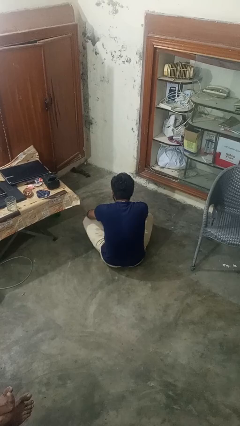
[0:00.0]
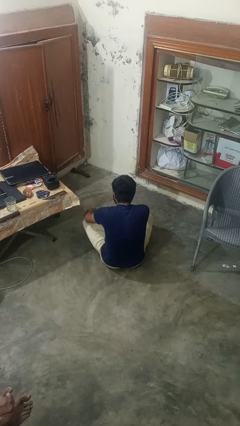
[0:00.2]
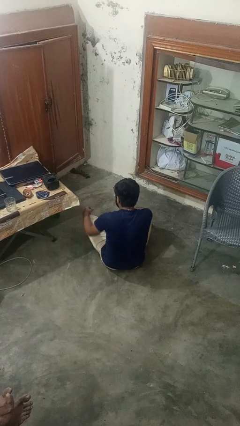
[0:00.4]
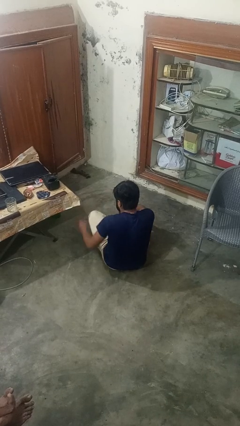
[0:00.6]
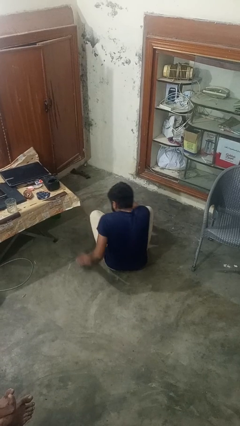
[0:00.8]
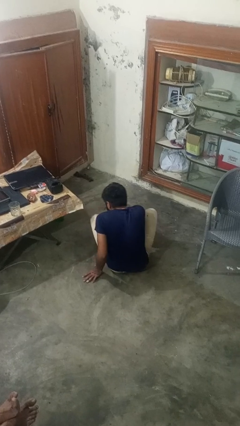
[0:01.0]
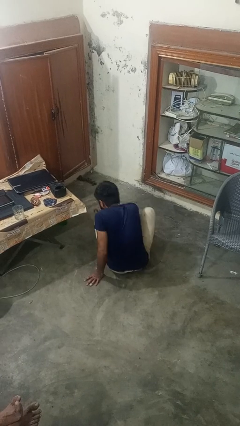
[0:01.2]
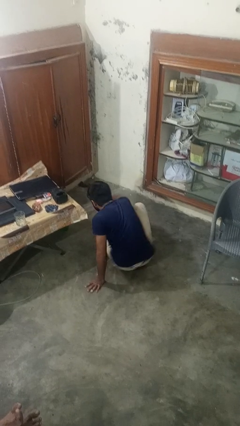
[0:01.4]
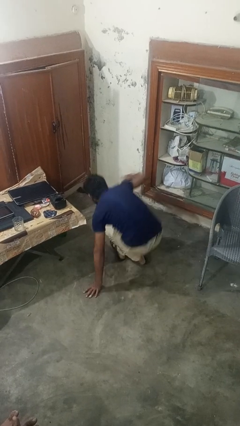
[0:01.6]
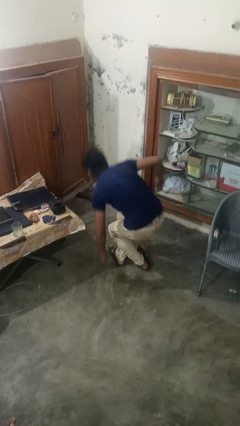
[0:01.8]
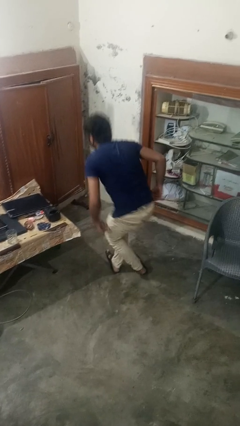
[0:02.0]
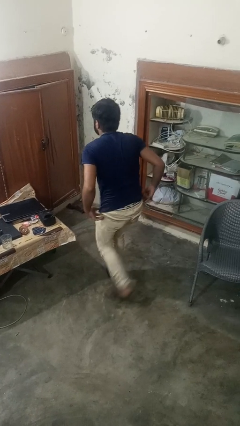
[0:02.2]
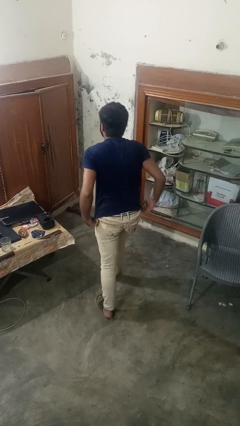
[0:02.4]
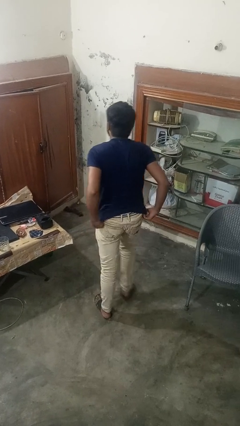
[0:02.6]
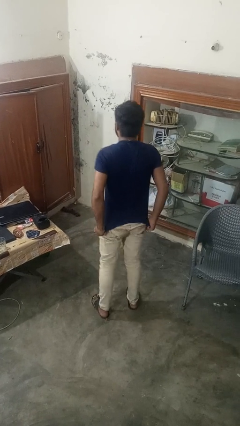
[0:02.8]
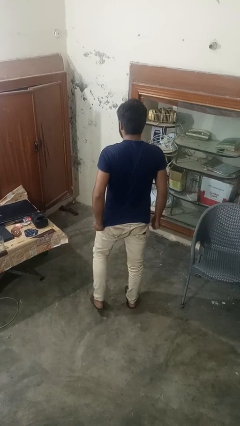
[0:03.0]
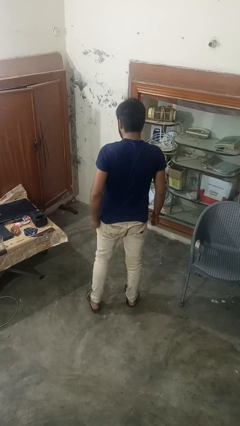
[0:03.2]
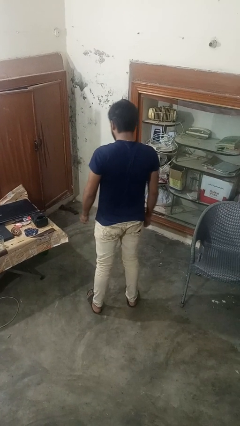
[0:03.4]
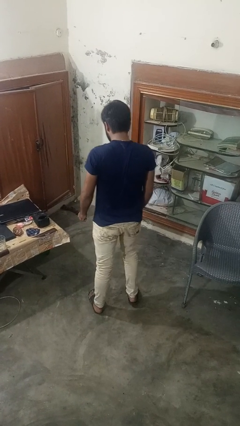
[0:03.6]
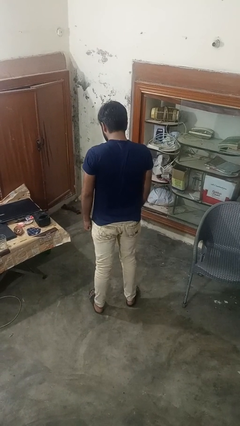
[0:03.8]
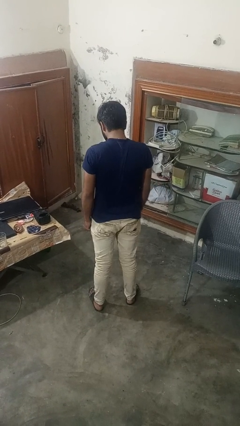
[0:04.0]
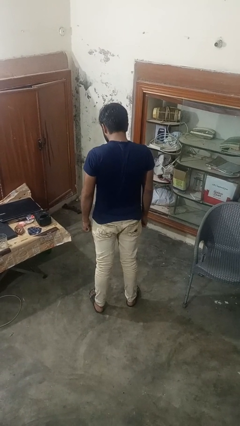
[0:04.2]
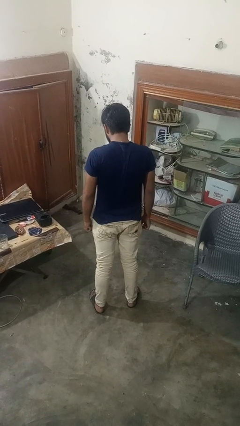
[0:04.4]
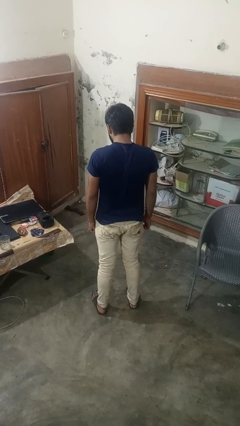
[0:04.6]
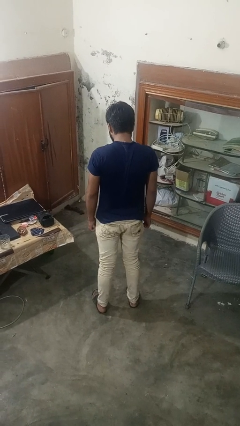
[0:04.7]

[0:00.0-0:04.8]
person stands up from floor

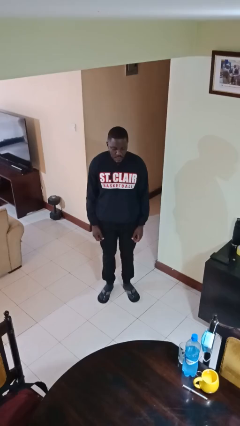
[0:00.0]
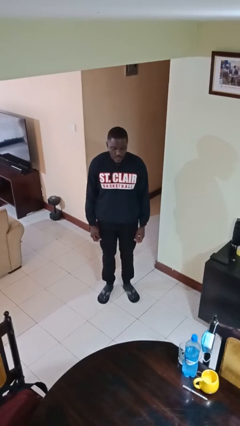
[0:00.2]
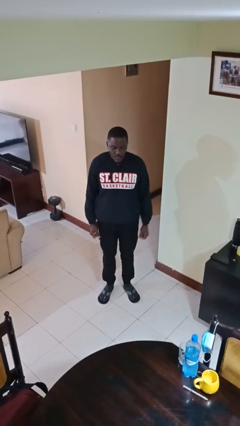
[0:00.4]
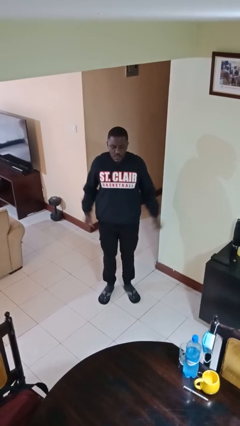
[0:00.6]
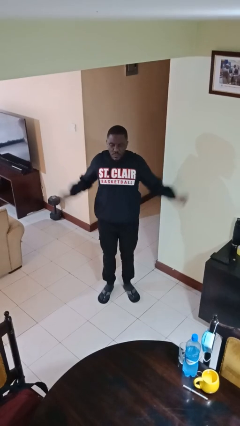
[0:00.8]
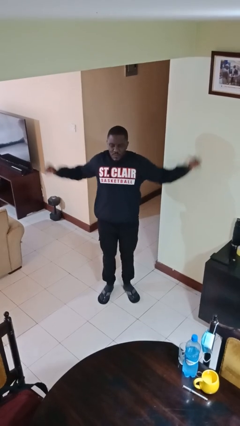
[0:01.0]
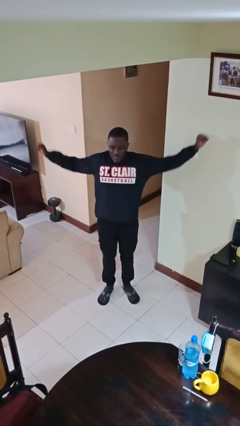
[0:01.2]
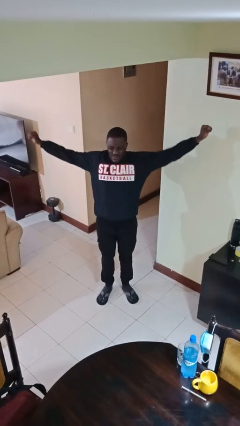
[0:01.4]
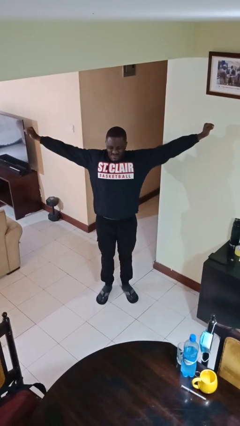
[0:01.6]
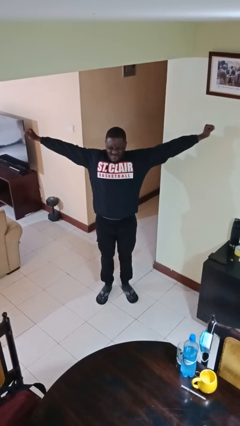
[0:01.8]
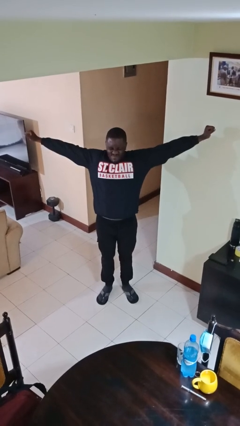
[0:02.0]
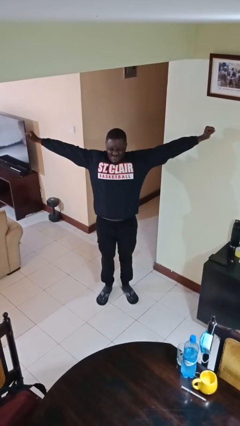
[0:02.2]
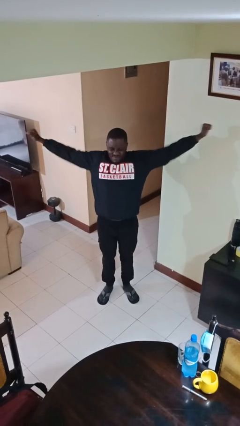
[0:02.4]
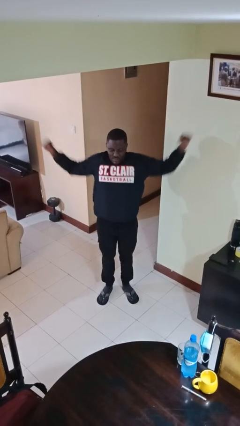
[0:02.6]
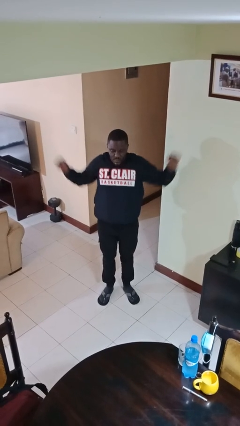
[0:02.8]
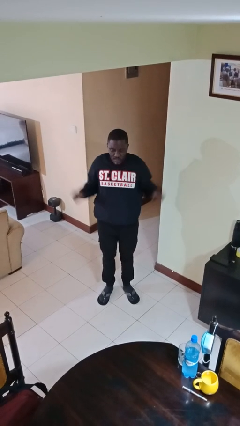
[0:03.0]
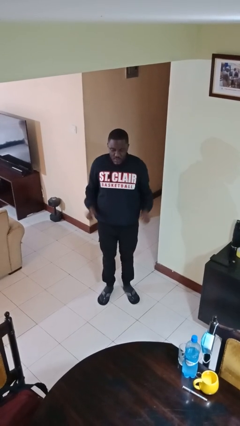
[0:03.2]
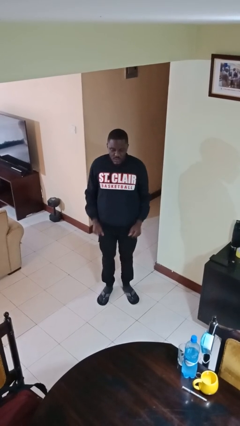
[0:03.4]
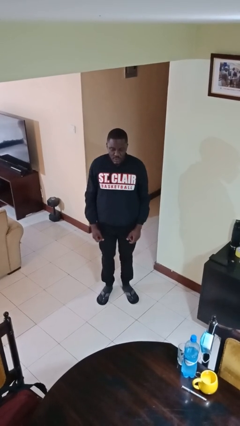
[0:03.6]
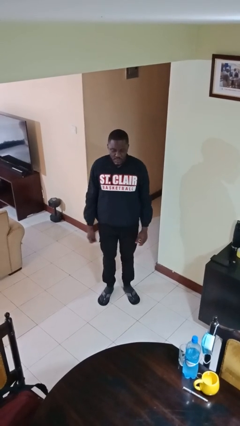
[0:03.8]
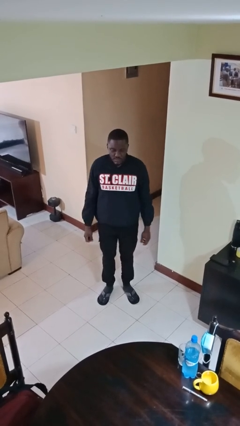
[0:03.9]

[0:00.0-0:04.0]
person stretches arms to side

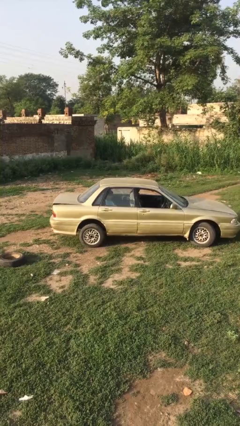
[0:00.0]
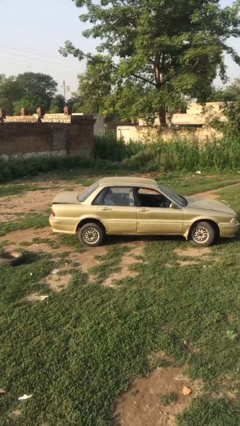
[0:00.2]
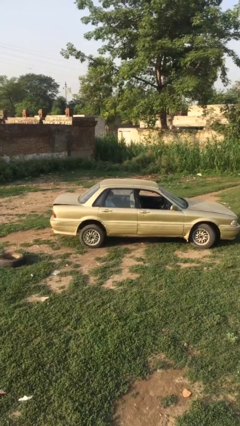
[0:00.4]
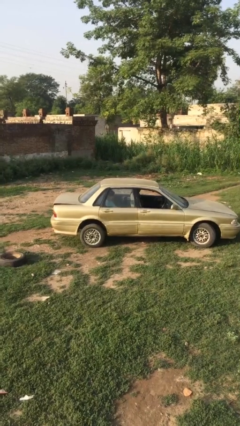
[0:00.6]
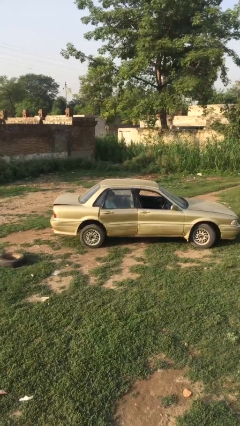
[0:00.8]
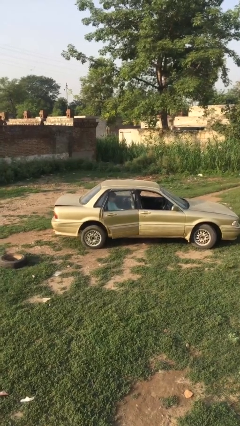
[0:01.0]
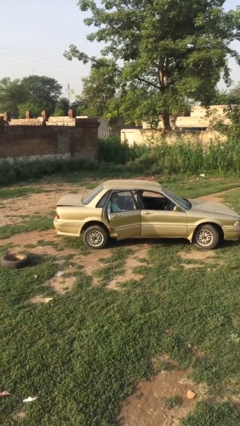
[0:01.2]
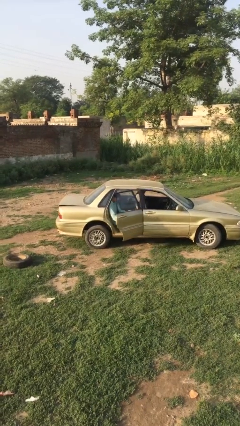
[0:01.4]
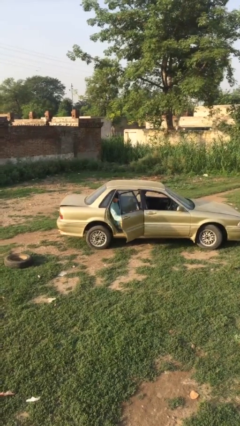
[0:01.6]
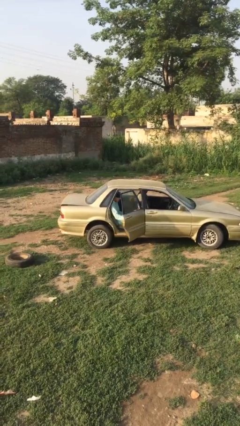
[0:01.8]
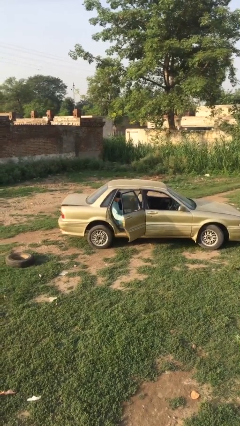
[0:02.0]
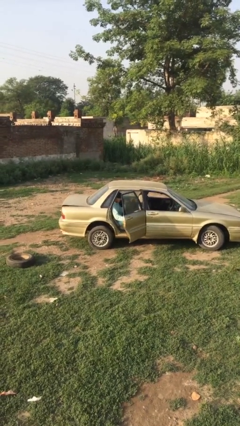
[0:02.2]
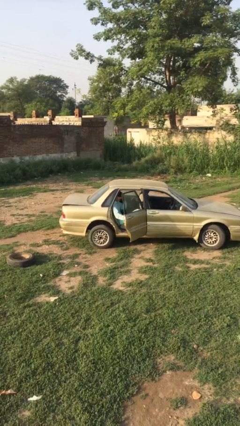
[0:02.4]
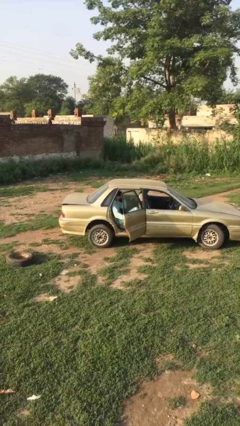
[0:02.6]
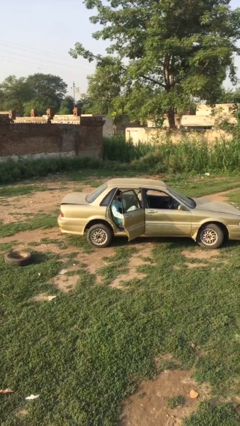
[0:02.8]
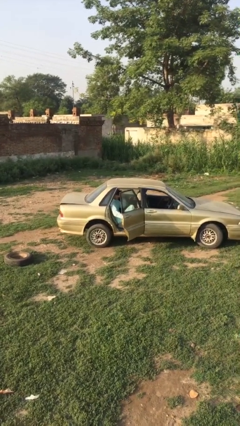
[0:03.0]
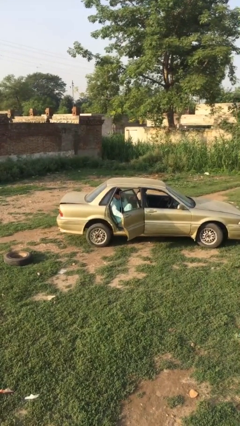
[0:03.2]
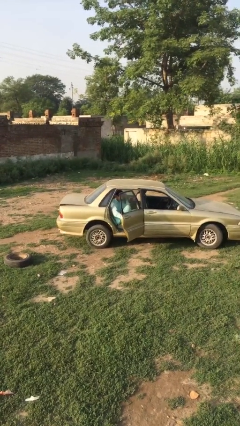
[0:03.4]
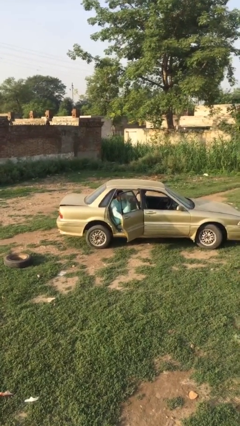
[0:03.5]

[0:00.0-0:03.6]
person opens car door

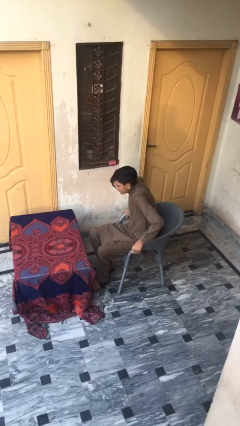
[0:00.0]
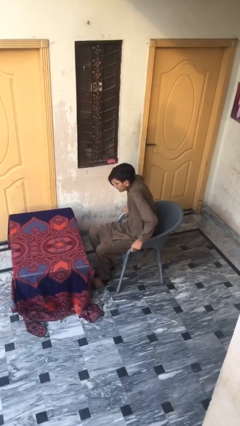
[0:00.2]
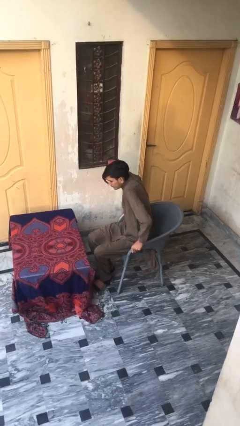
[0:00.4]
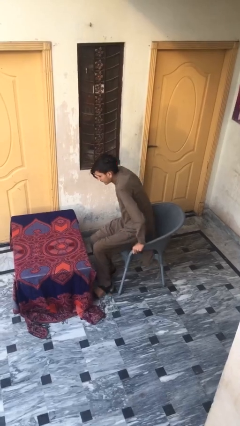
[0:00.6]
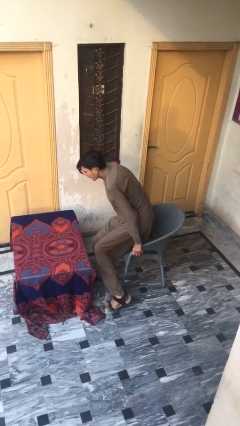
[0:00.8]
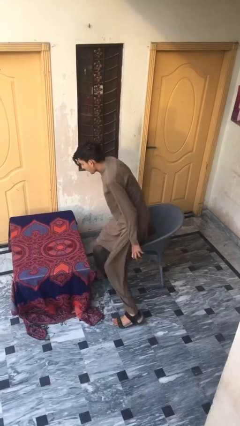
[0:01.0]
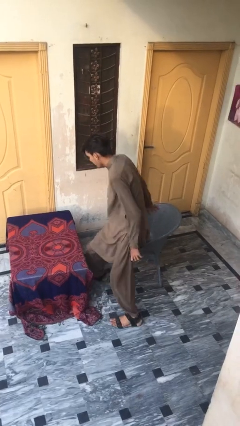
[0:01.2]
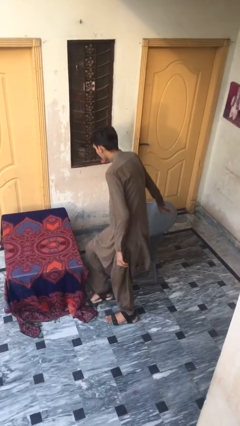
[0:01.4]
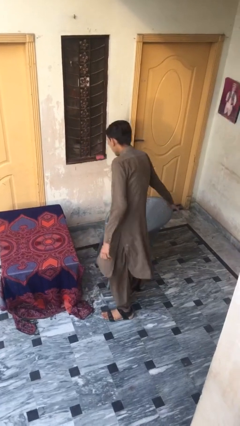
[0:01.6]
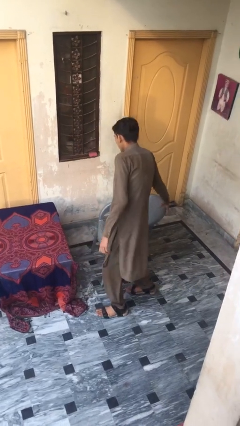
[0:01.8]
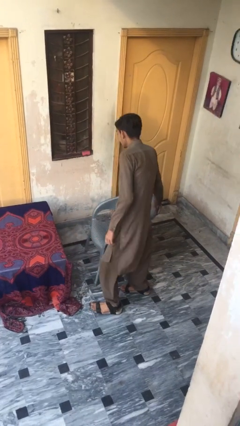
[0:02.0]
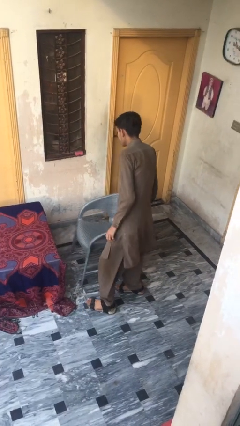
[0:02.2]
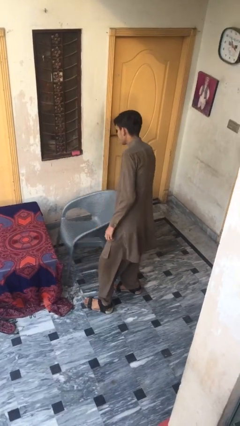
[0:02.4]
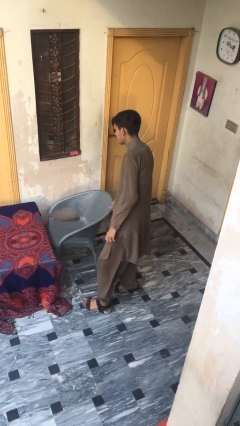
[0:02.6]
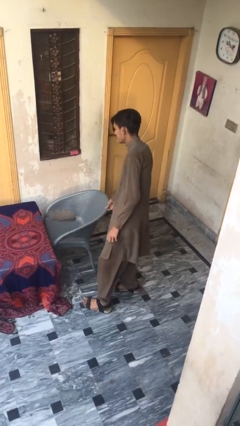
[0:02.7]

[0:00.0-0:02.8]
person stands up

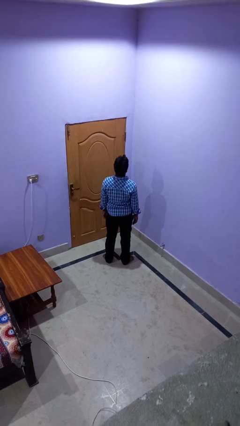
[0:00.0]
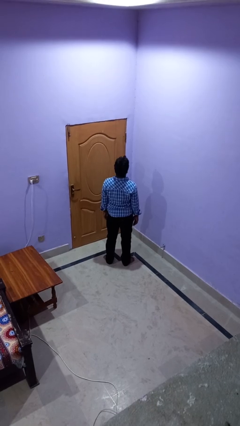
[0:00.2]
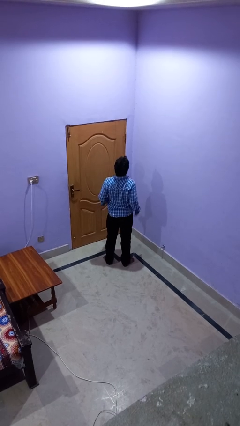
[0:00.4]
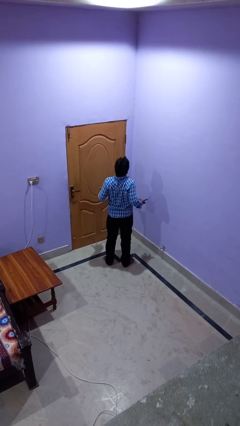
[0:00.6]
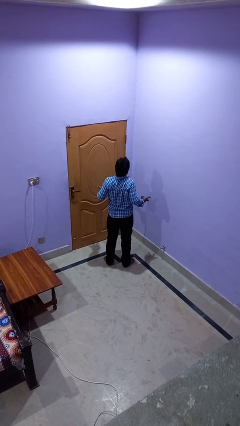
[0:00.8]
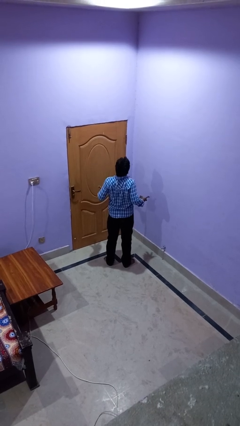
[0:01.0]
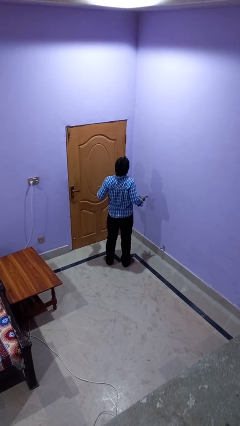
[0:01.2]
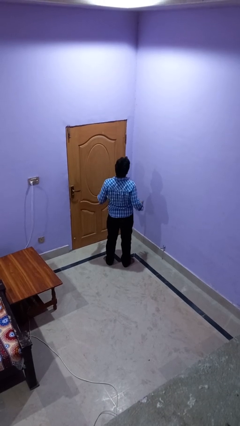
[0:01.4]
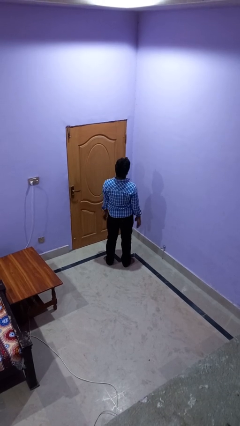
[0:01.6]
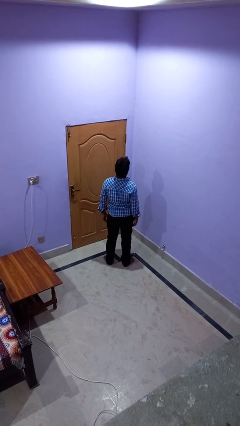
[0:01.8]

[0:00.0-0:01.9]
person shrugs

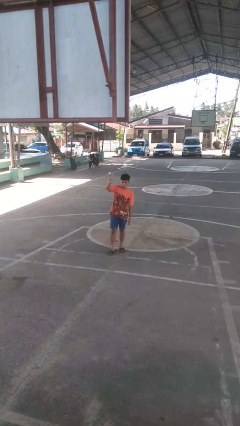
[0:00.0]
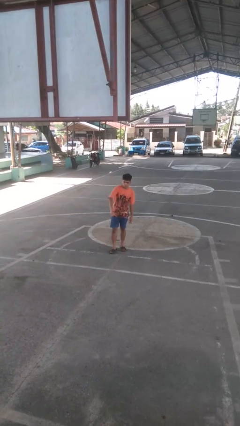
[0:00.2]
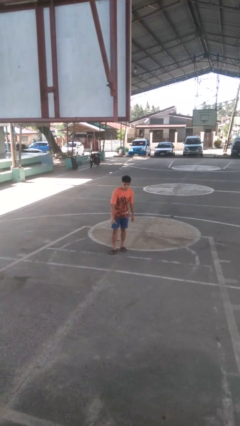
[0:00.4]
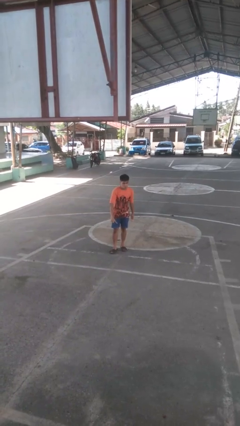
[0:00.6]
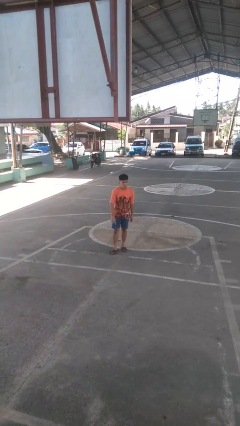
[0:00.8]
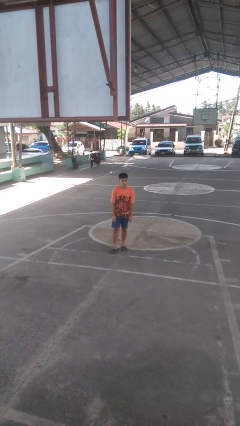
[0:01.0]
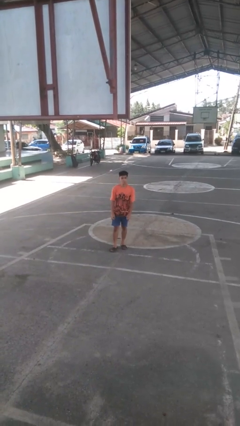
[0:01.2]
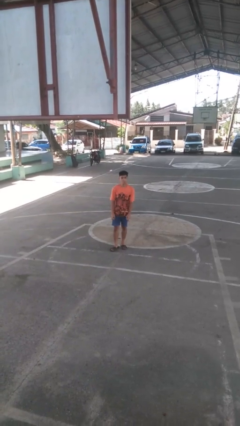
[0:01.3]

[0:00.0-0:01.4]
person gestures swipe down
